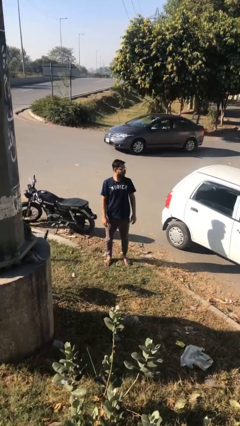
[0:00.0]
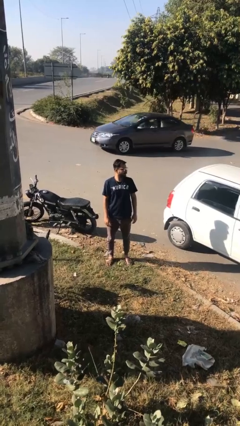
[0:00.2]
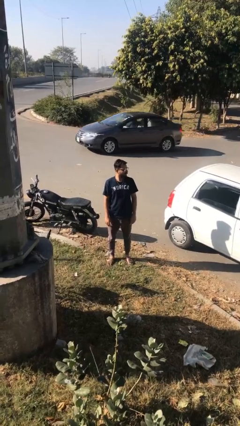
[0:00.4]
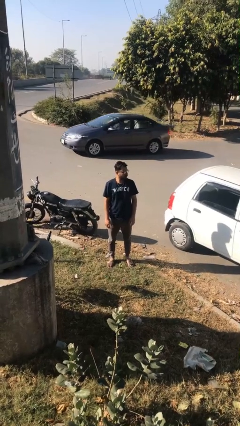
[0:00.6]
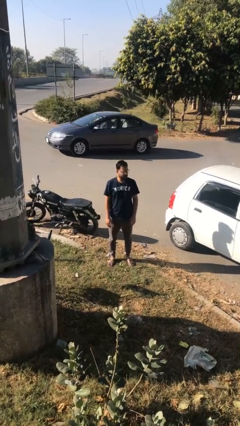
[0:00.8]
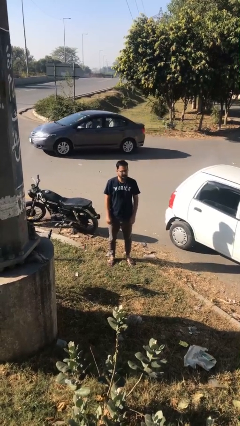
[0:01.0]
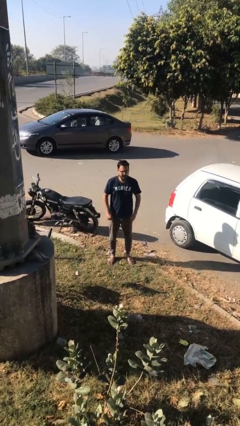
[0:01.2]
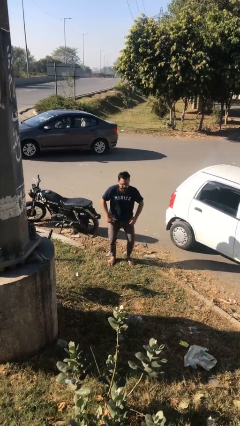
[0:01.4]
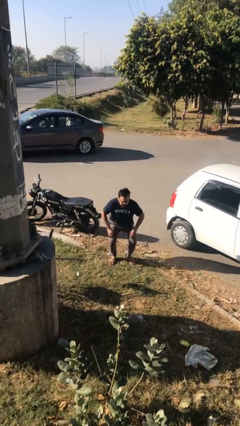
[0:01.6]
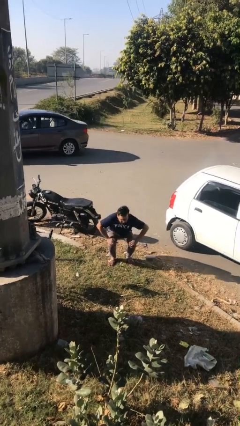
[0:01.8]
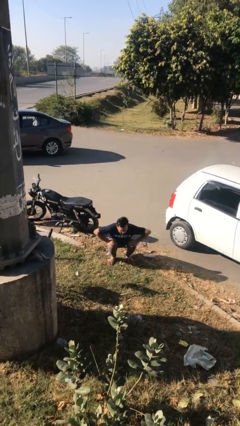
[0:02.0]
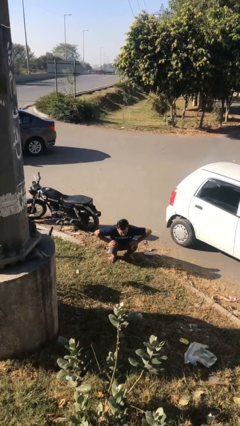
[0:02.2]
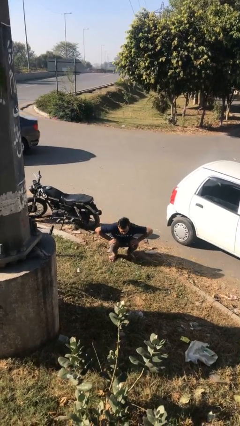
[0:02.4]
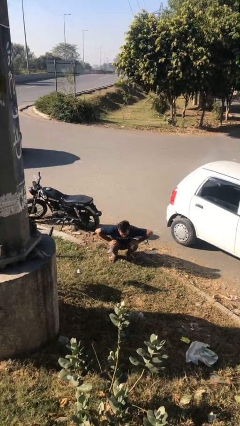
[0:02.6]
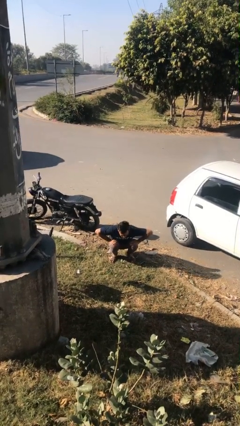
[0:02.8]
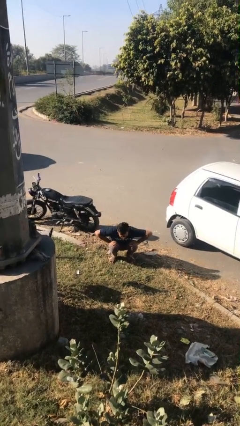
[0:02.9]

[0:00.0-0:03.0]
person sits down

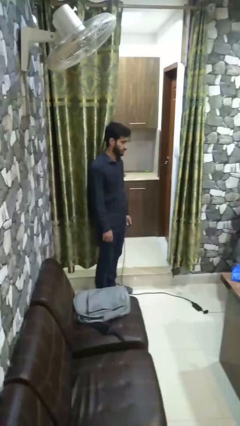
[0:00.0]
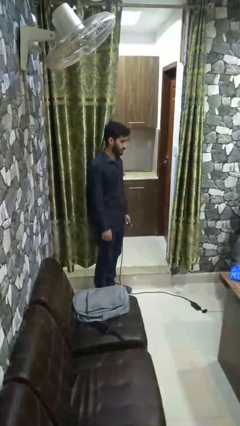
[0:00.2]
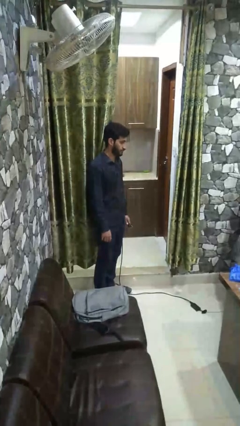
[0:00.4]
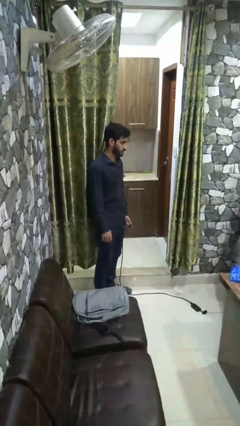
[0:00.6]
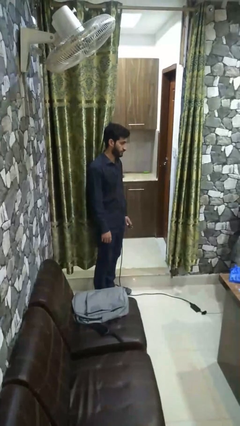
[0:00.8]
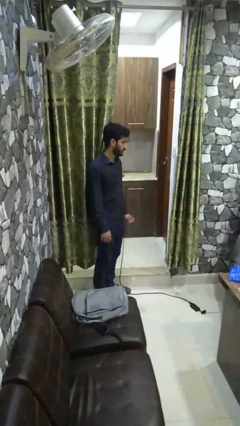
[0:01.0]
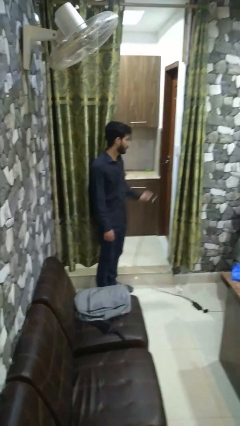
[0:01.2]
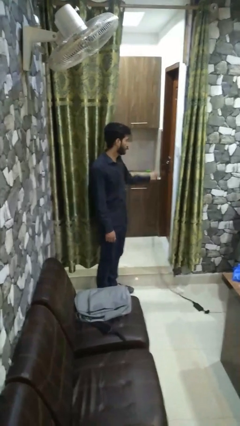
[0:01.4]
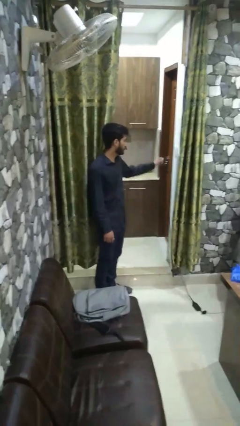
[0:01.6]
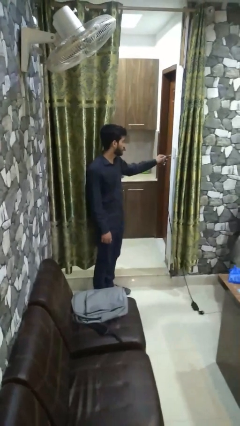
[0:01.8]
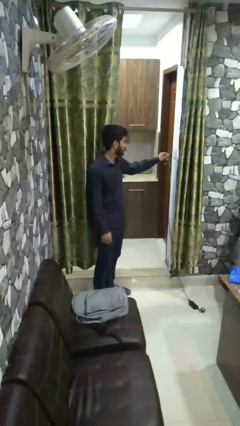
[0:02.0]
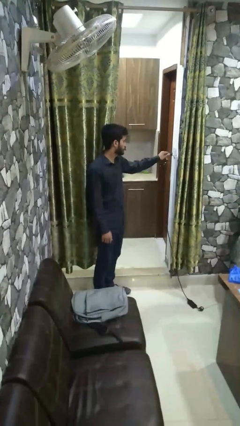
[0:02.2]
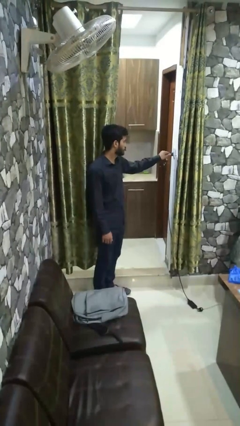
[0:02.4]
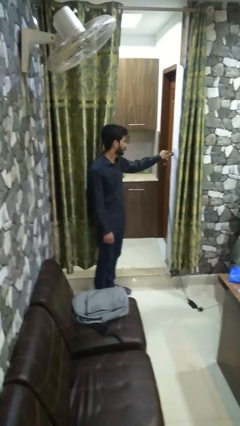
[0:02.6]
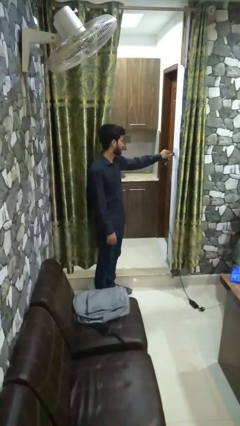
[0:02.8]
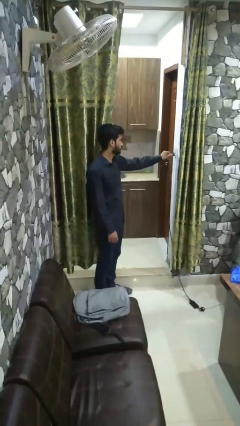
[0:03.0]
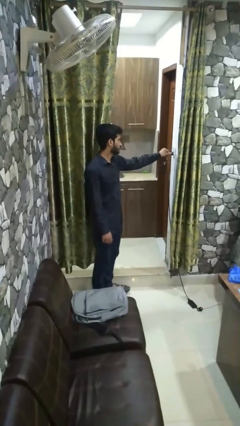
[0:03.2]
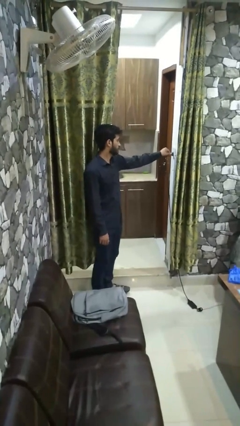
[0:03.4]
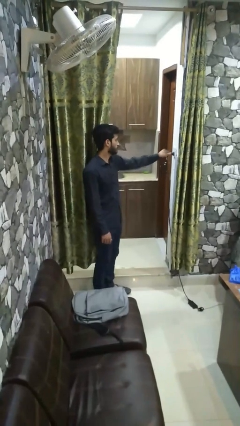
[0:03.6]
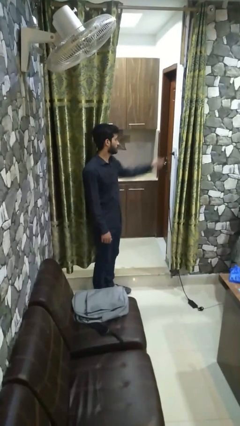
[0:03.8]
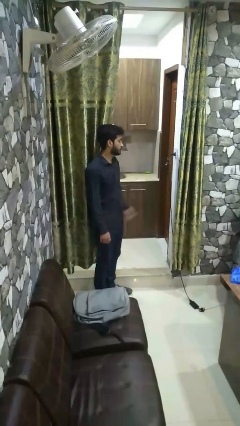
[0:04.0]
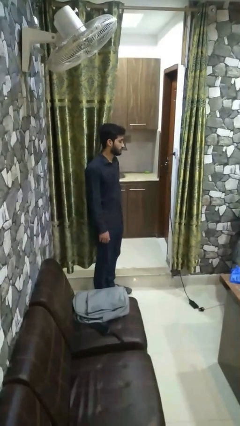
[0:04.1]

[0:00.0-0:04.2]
person plugs into electrical socket

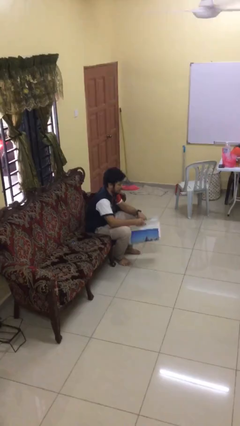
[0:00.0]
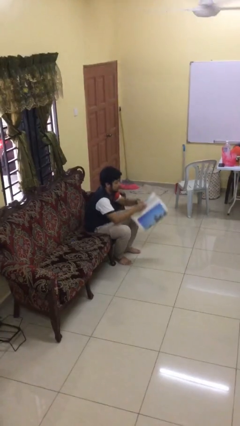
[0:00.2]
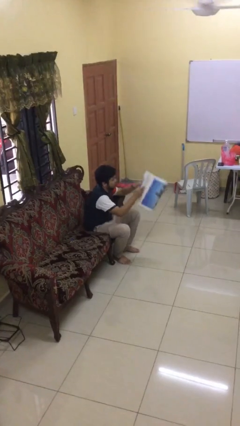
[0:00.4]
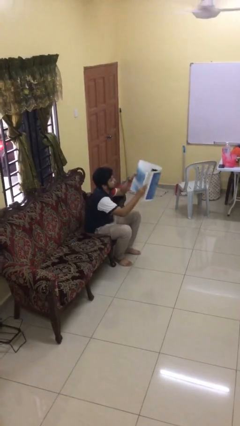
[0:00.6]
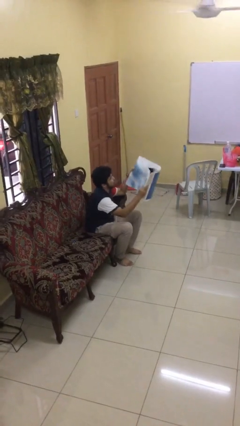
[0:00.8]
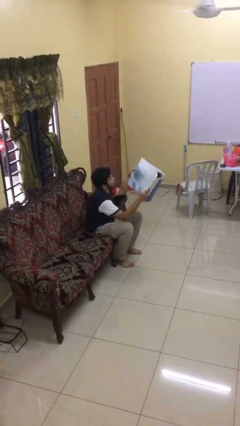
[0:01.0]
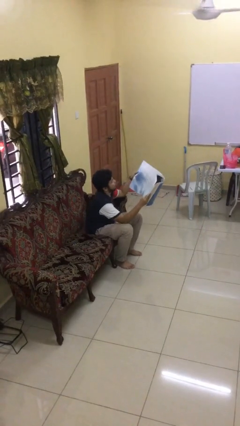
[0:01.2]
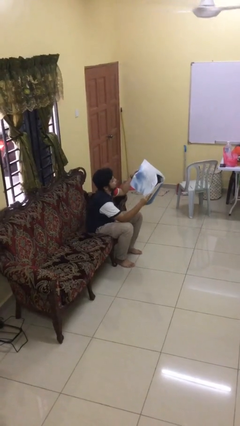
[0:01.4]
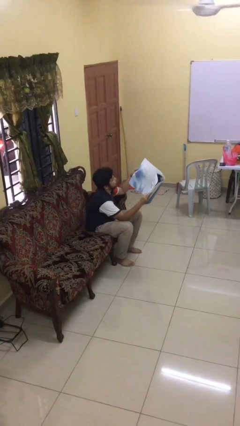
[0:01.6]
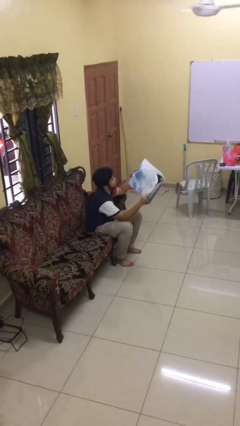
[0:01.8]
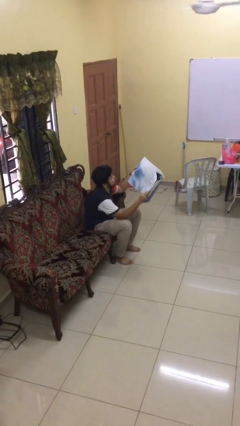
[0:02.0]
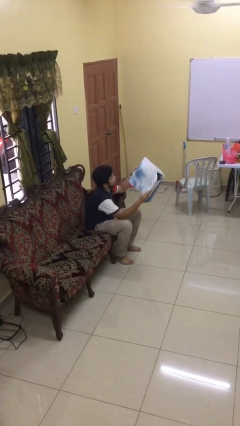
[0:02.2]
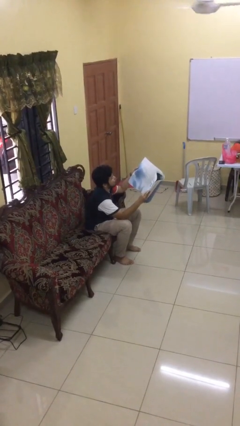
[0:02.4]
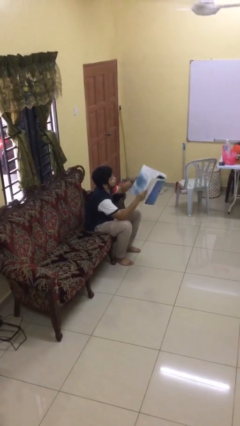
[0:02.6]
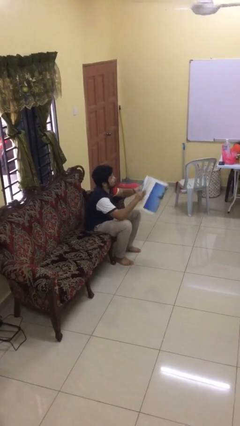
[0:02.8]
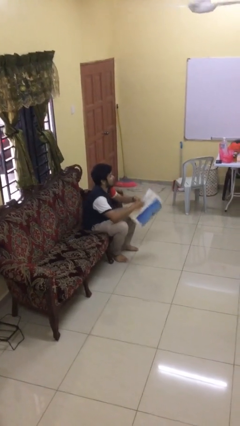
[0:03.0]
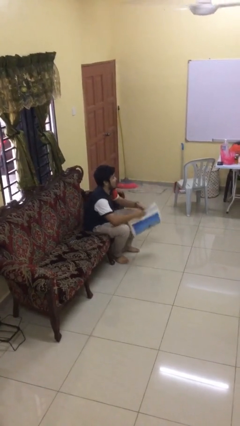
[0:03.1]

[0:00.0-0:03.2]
person reads newspaper

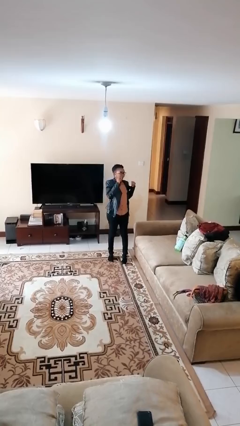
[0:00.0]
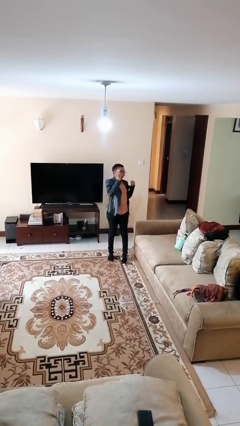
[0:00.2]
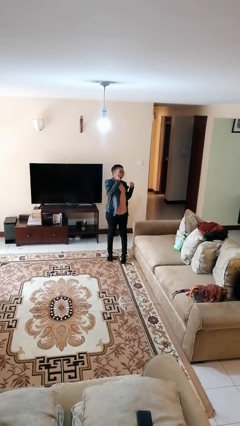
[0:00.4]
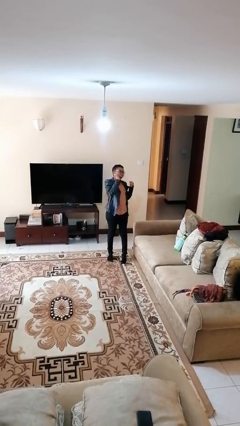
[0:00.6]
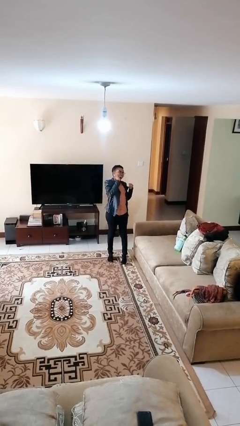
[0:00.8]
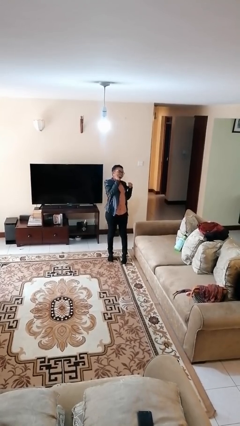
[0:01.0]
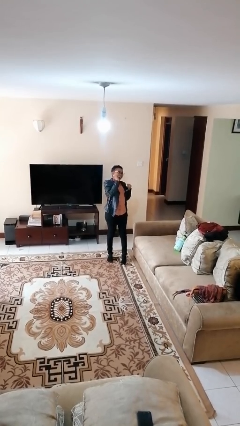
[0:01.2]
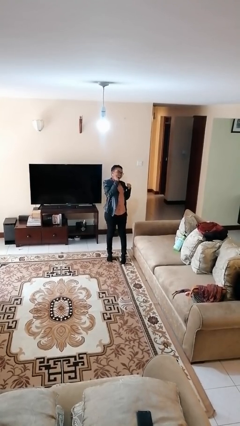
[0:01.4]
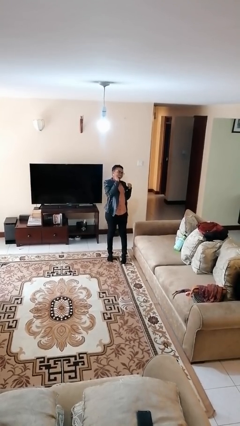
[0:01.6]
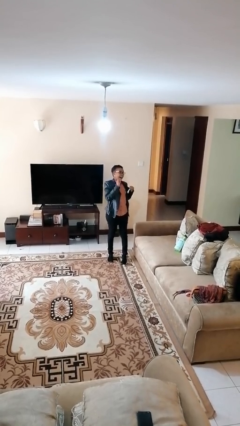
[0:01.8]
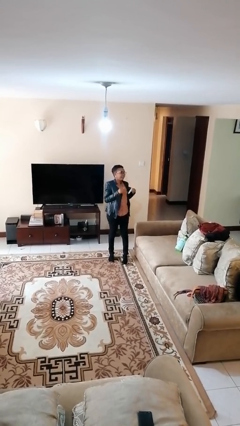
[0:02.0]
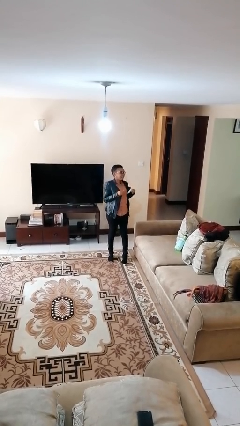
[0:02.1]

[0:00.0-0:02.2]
person flosses

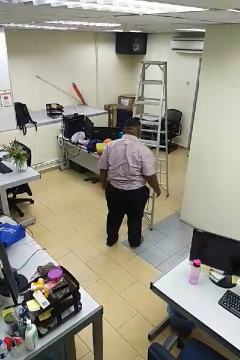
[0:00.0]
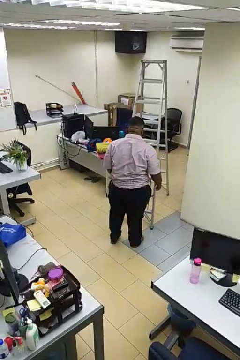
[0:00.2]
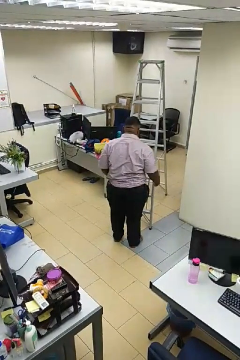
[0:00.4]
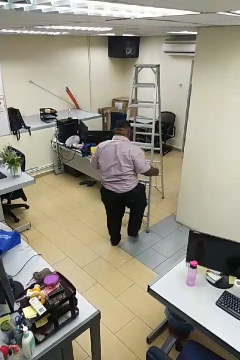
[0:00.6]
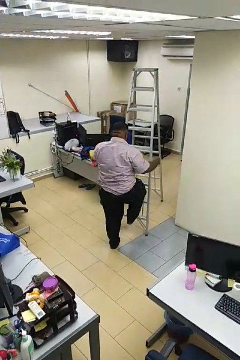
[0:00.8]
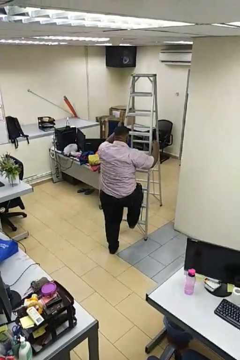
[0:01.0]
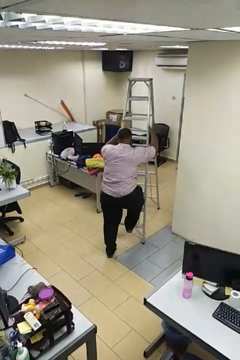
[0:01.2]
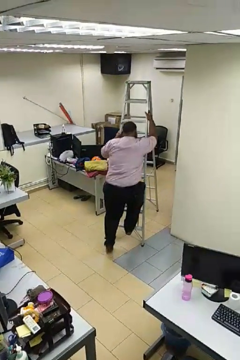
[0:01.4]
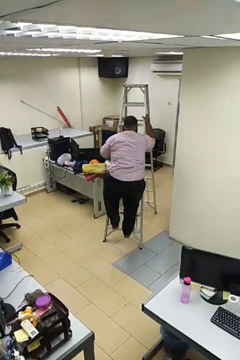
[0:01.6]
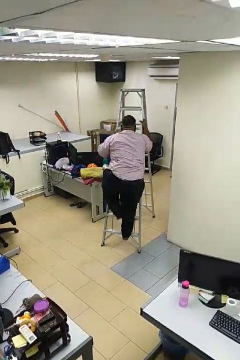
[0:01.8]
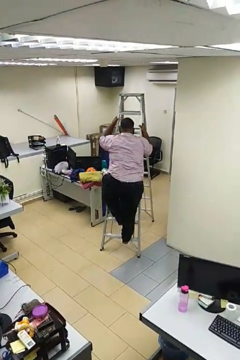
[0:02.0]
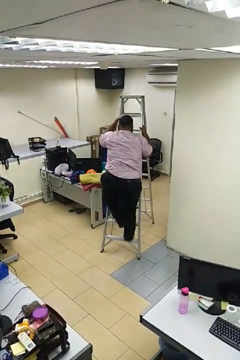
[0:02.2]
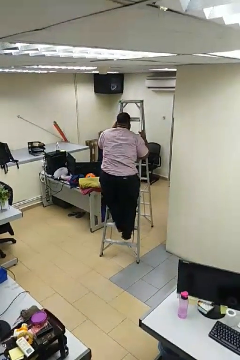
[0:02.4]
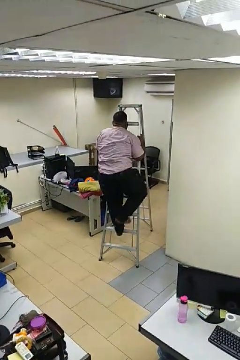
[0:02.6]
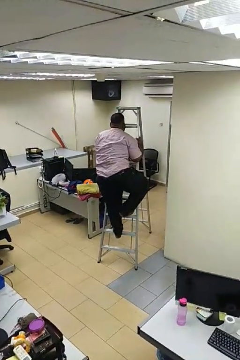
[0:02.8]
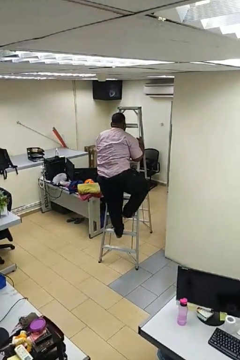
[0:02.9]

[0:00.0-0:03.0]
person climbs up ladder

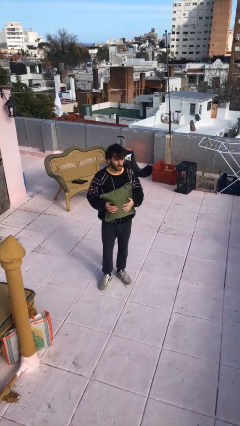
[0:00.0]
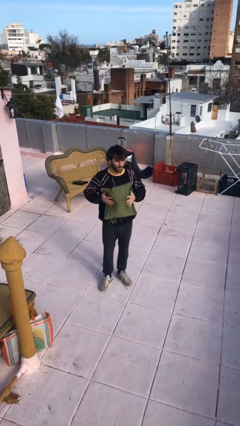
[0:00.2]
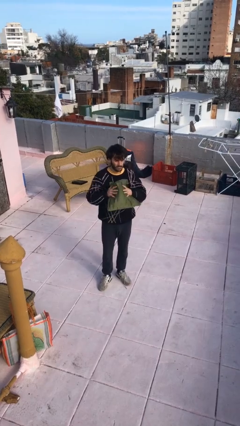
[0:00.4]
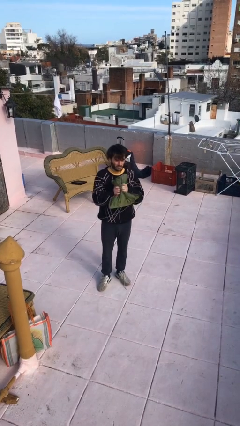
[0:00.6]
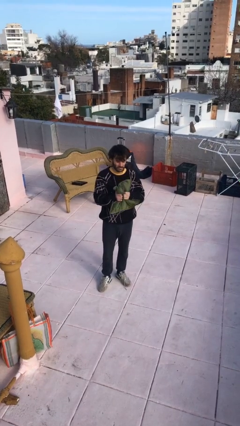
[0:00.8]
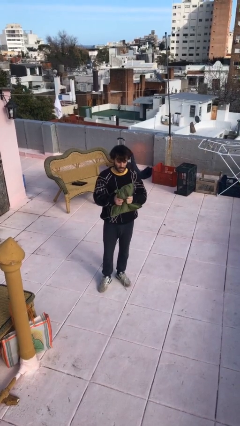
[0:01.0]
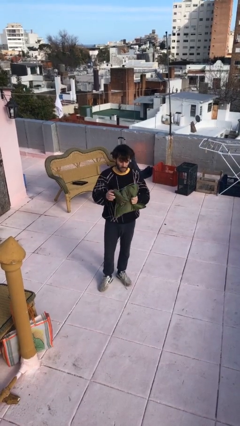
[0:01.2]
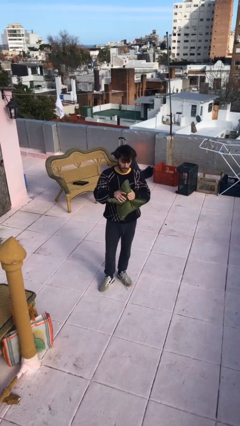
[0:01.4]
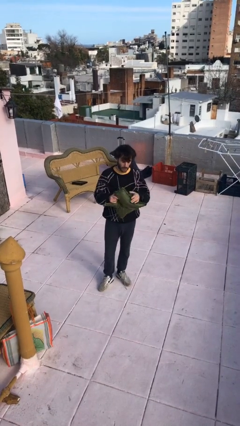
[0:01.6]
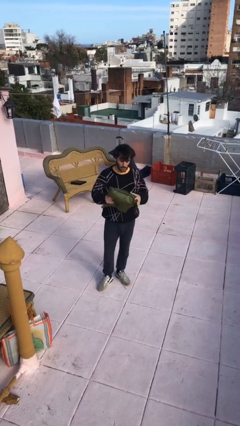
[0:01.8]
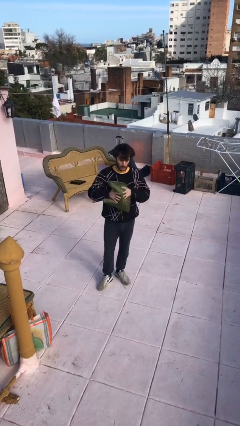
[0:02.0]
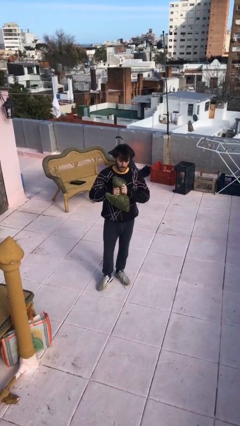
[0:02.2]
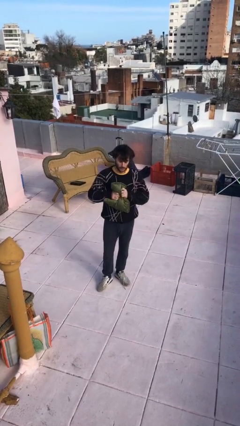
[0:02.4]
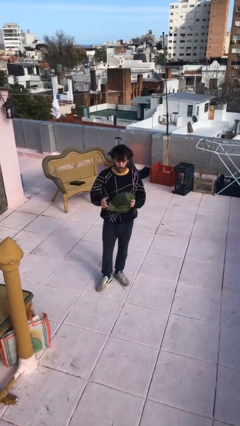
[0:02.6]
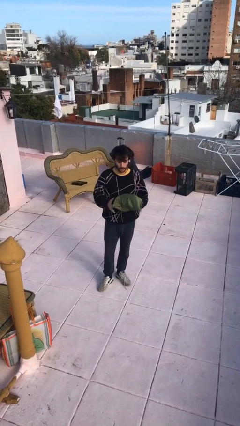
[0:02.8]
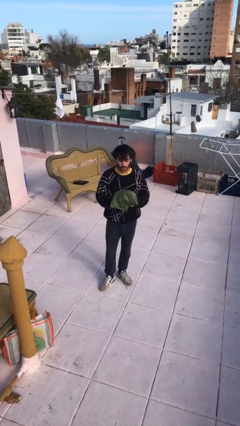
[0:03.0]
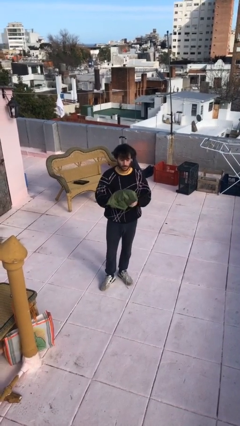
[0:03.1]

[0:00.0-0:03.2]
person squeezes object
